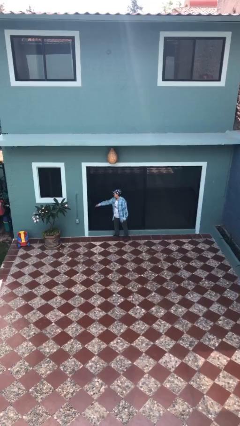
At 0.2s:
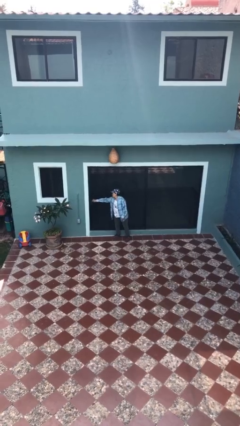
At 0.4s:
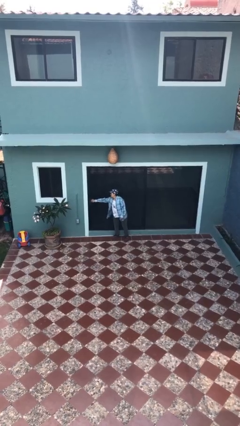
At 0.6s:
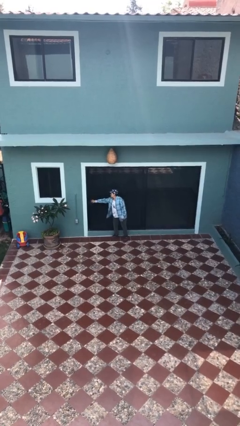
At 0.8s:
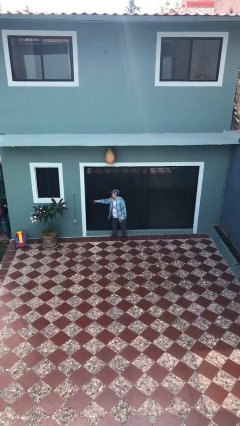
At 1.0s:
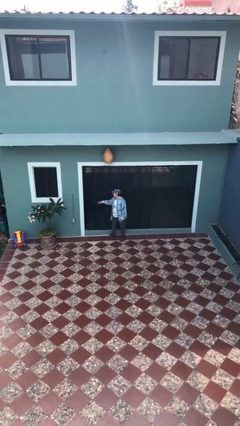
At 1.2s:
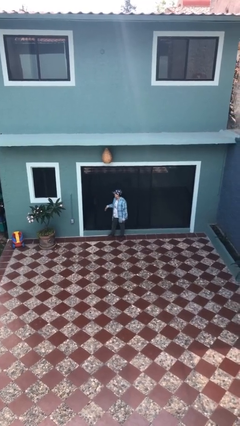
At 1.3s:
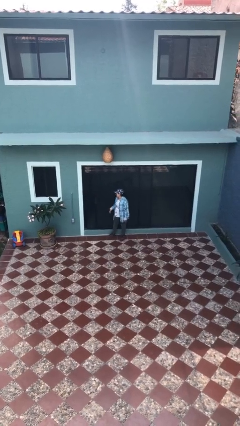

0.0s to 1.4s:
person opens sliding door

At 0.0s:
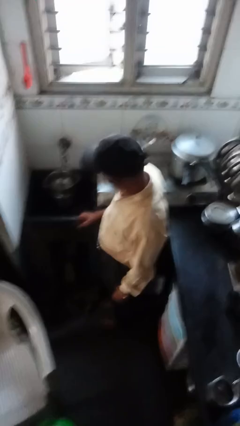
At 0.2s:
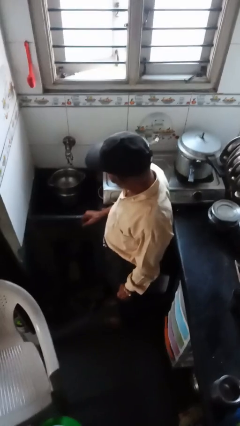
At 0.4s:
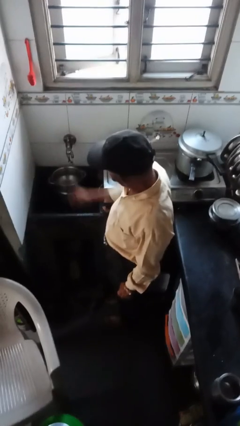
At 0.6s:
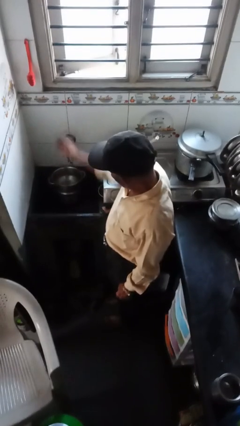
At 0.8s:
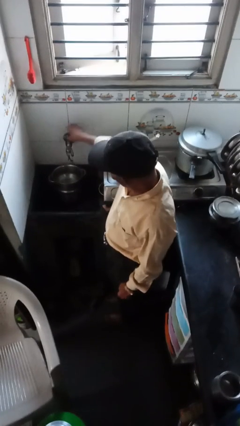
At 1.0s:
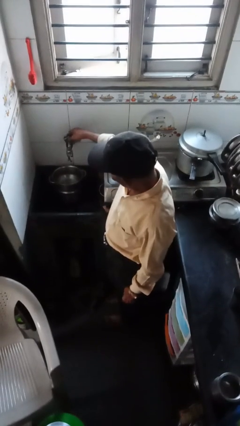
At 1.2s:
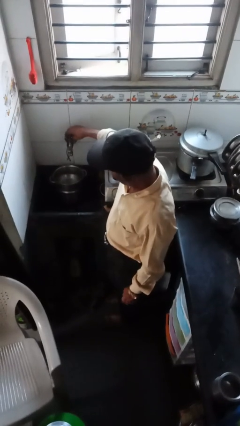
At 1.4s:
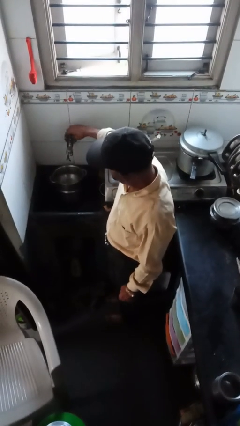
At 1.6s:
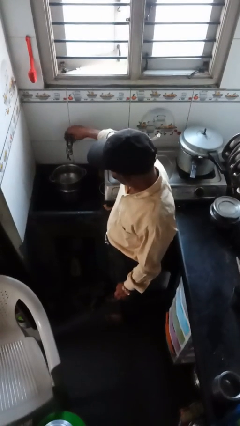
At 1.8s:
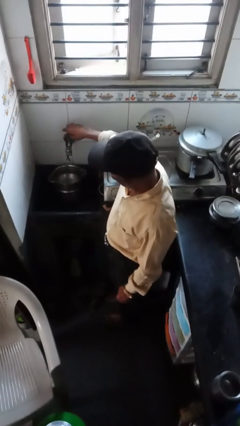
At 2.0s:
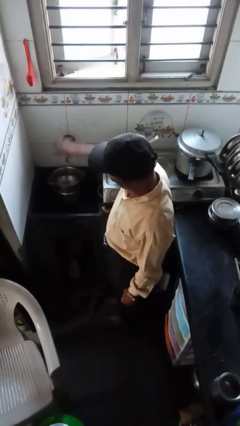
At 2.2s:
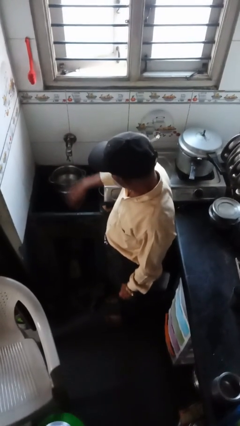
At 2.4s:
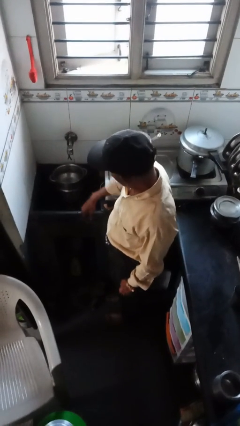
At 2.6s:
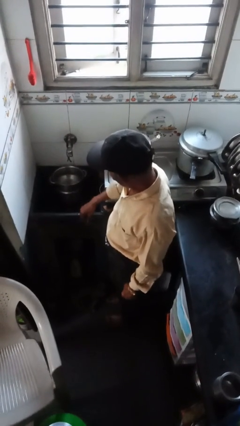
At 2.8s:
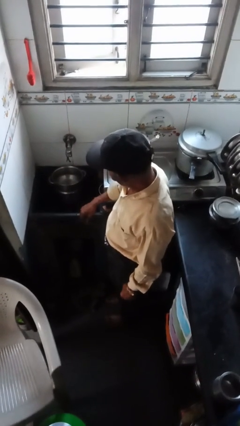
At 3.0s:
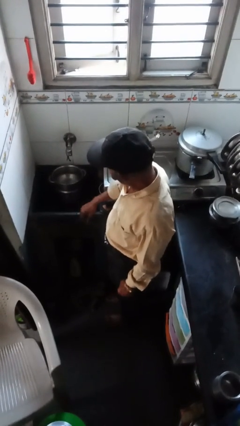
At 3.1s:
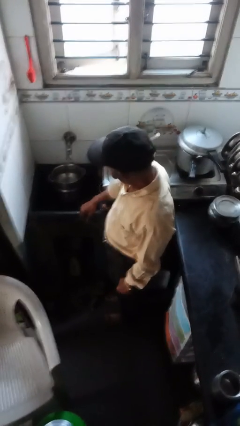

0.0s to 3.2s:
person turns on faucet

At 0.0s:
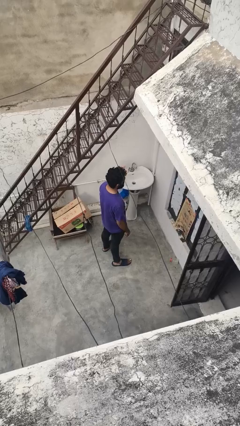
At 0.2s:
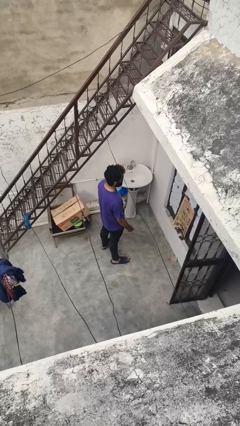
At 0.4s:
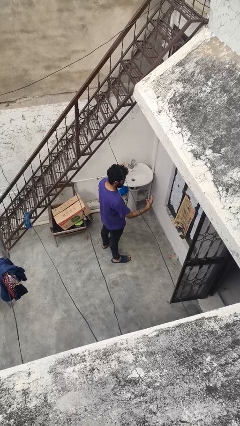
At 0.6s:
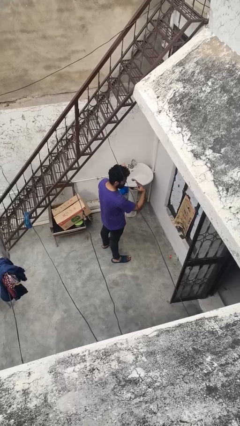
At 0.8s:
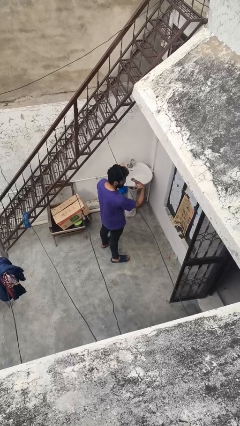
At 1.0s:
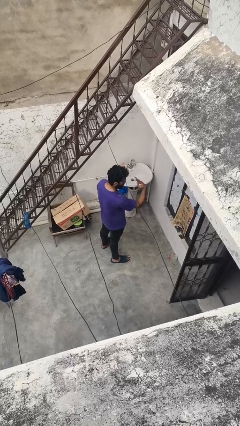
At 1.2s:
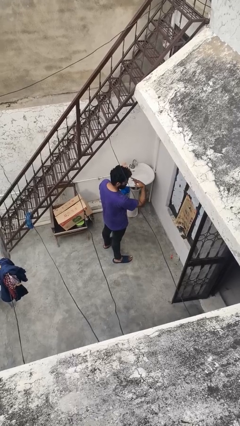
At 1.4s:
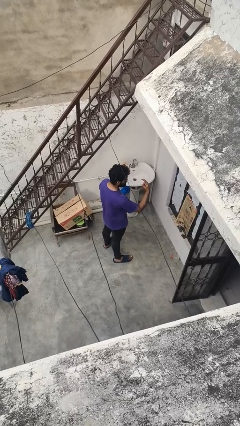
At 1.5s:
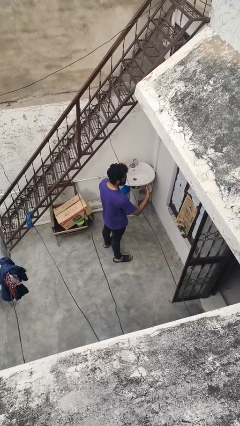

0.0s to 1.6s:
person gestures watch closely

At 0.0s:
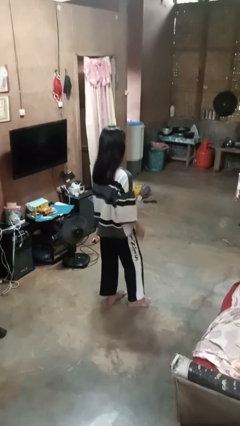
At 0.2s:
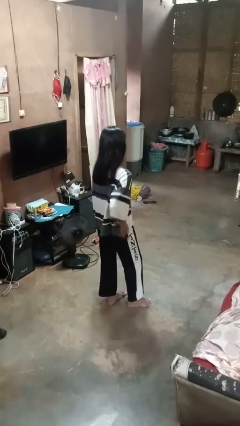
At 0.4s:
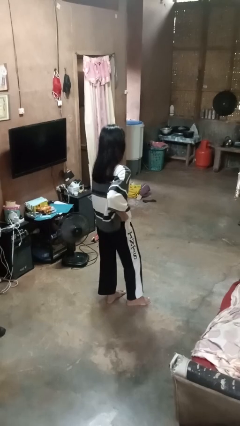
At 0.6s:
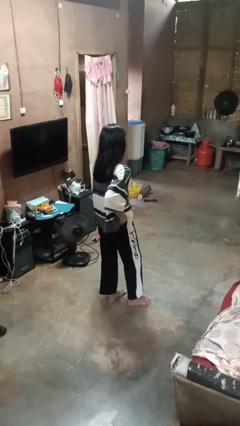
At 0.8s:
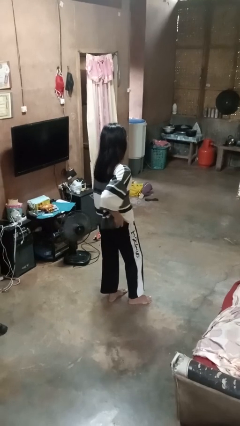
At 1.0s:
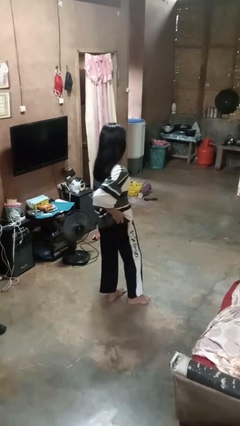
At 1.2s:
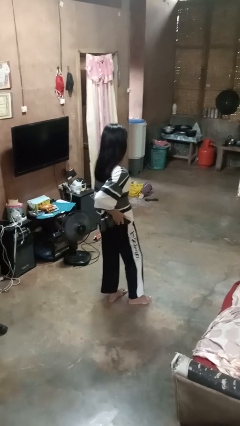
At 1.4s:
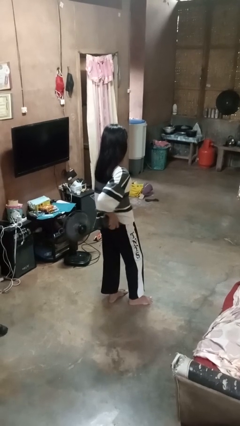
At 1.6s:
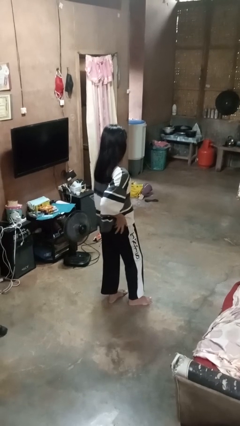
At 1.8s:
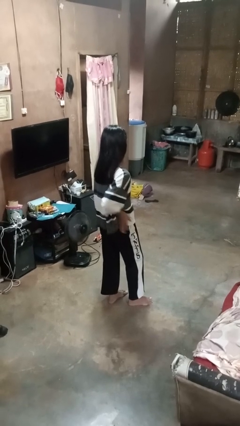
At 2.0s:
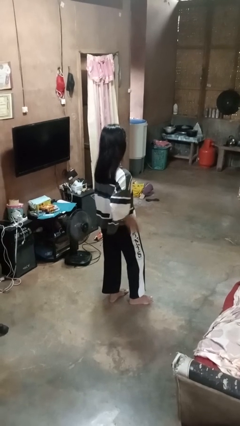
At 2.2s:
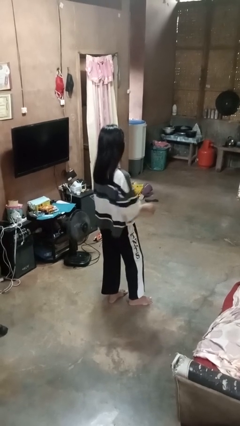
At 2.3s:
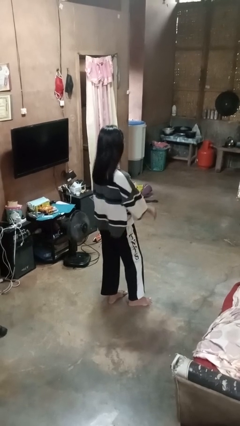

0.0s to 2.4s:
person puts phone into pocket

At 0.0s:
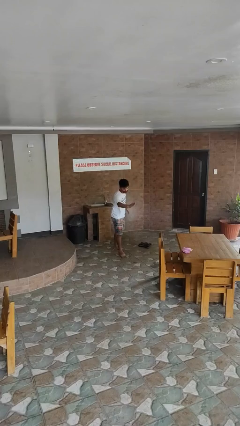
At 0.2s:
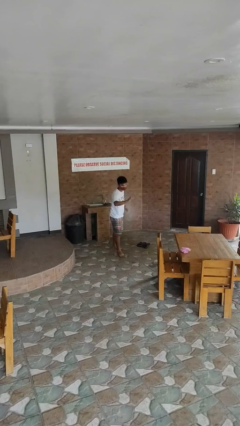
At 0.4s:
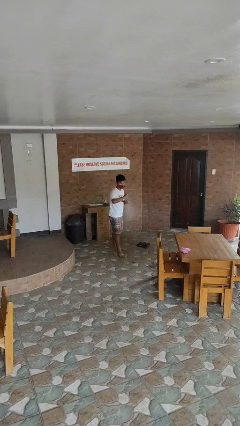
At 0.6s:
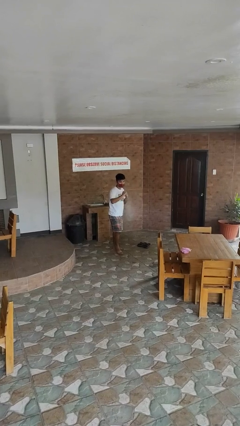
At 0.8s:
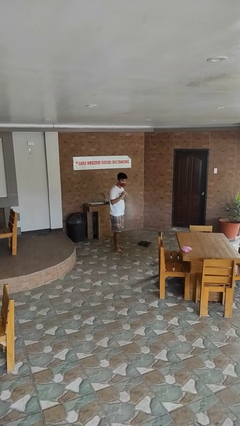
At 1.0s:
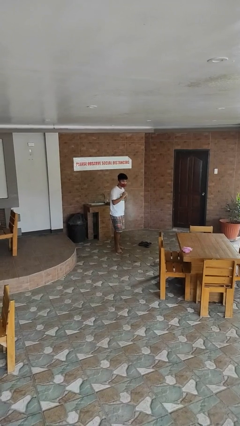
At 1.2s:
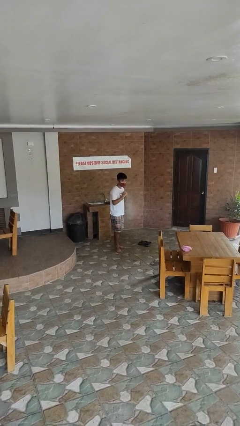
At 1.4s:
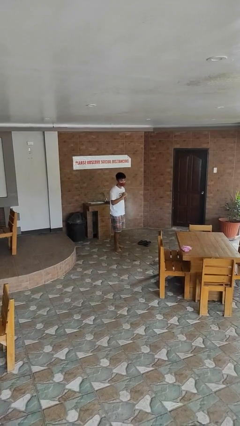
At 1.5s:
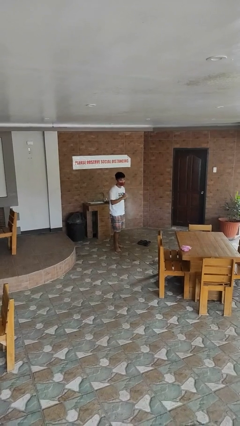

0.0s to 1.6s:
person karate chop

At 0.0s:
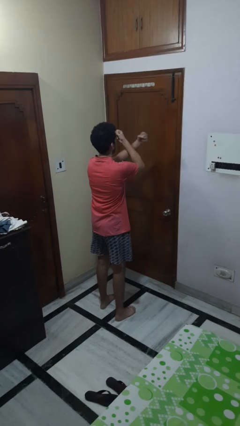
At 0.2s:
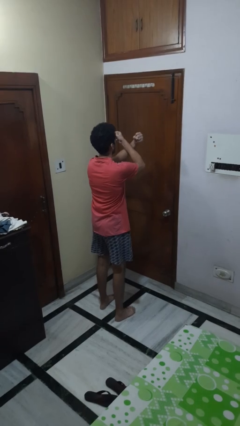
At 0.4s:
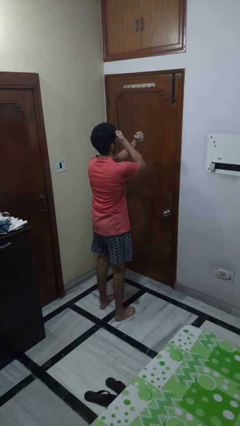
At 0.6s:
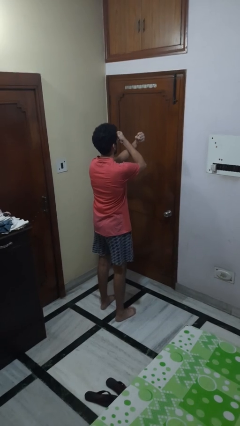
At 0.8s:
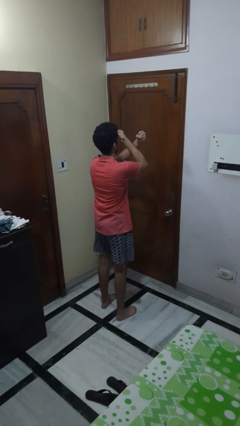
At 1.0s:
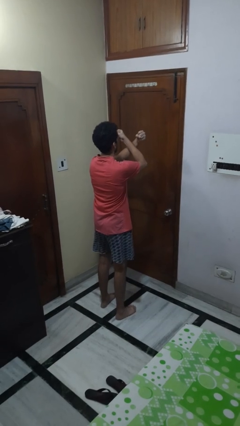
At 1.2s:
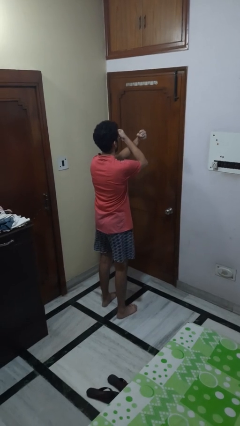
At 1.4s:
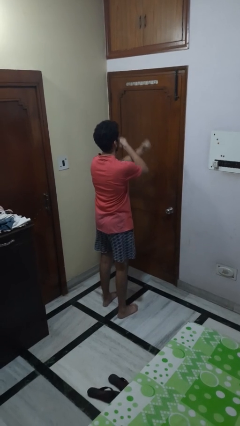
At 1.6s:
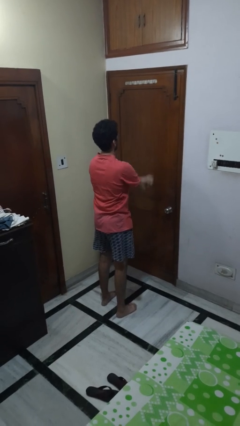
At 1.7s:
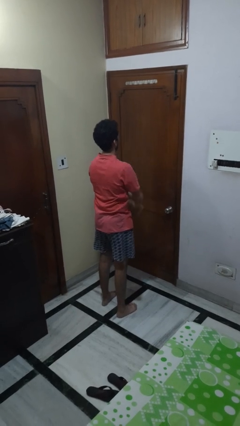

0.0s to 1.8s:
person gestures arms x

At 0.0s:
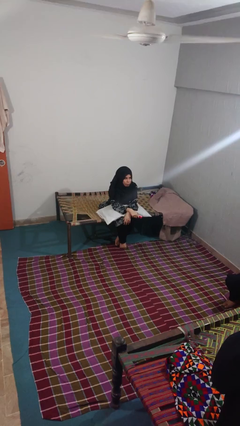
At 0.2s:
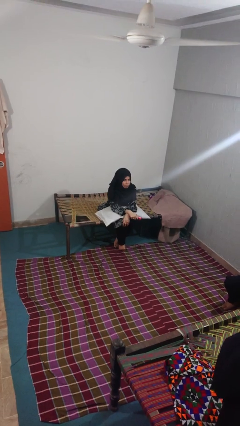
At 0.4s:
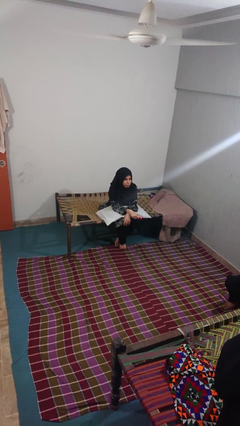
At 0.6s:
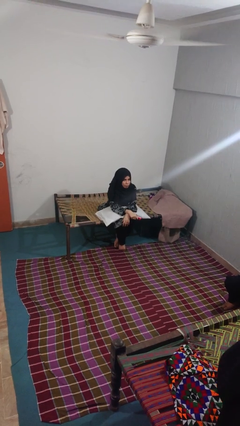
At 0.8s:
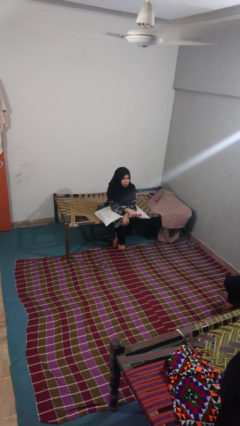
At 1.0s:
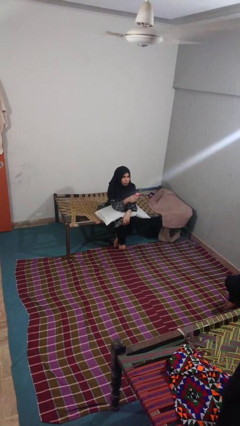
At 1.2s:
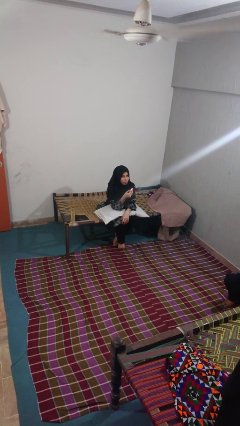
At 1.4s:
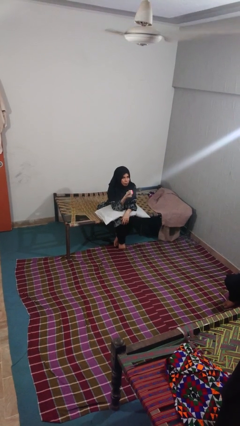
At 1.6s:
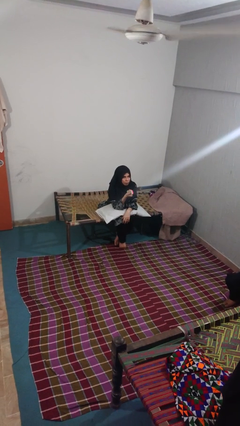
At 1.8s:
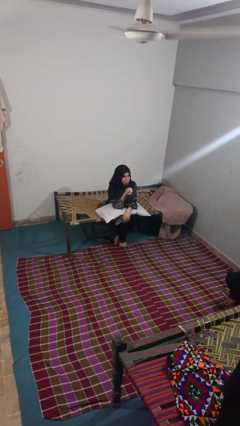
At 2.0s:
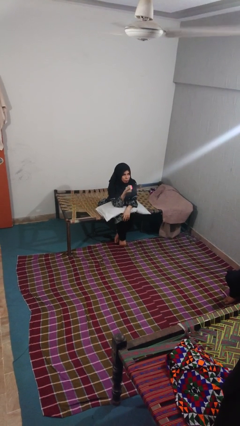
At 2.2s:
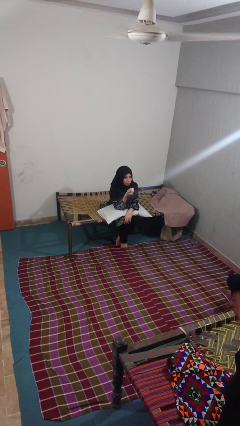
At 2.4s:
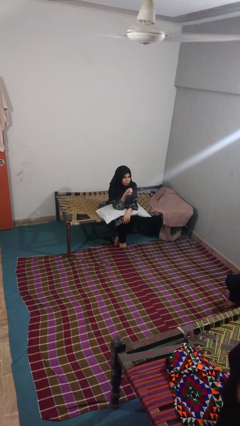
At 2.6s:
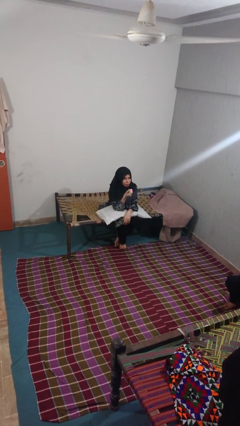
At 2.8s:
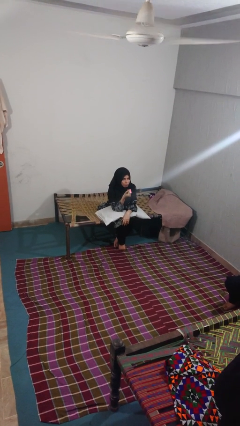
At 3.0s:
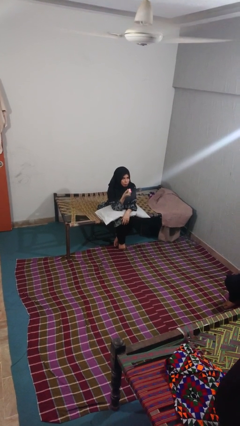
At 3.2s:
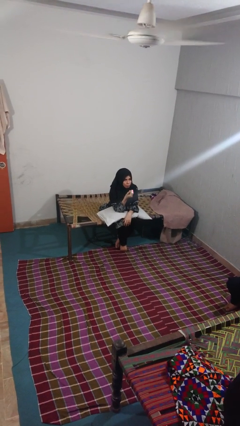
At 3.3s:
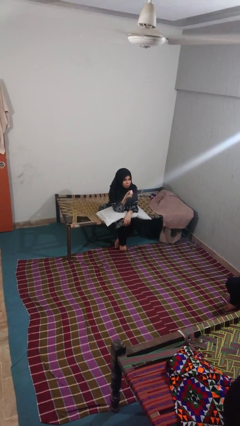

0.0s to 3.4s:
person uses television remote

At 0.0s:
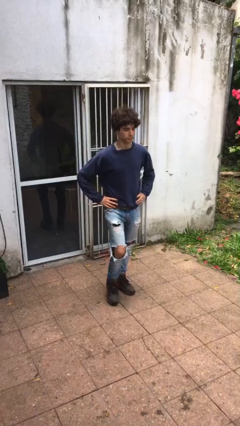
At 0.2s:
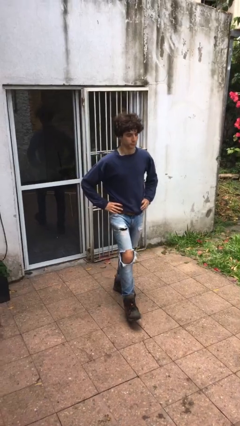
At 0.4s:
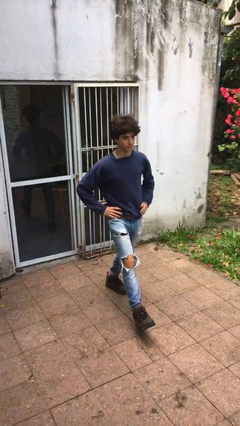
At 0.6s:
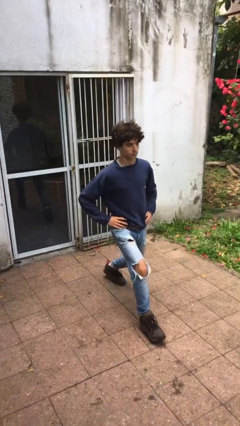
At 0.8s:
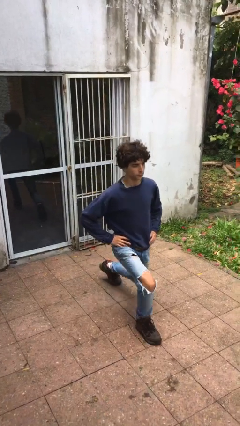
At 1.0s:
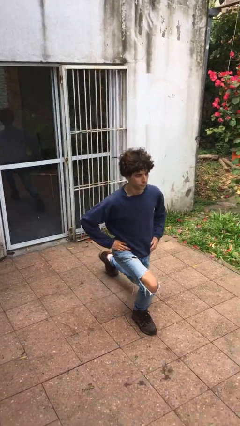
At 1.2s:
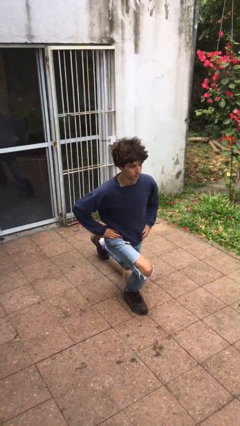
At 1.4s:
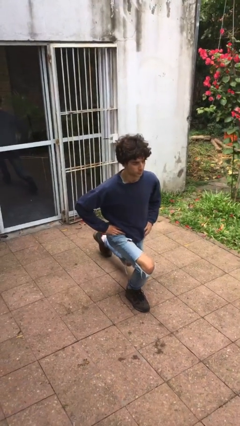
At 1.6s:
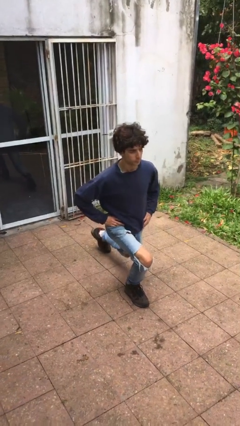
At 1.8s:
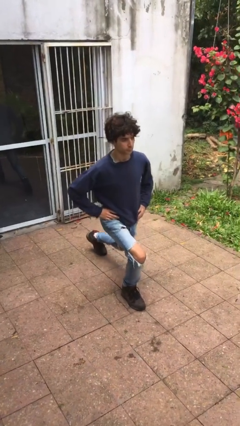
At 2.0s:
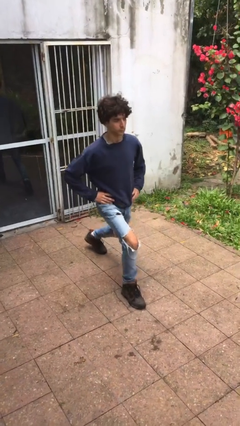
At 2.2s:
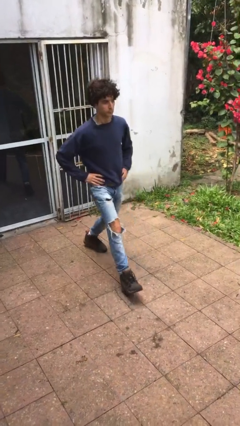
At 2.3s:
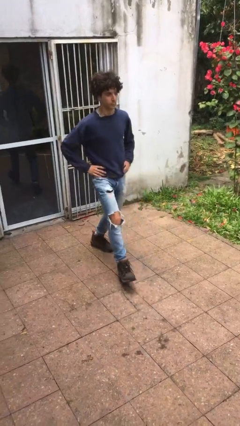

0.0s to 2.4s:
person exercises with lunges
